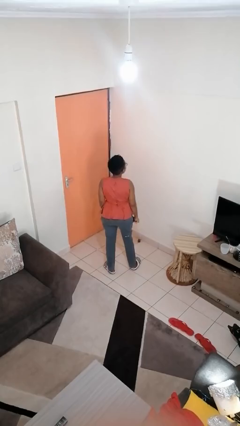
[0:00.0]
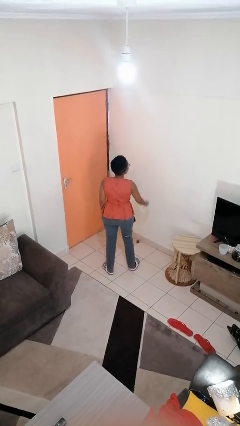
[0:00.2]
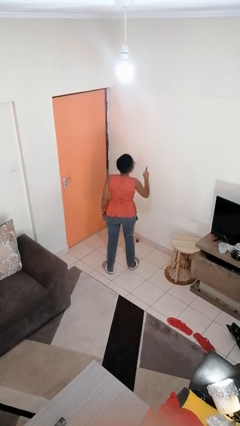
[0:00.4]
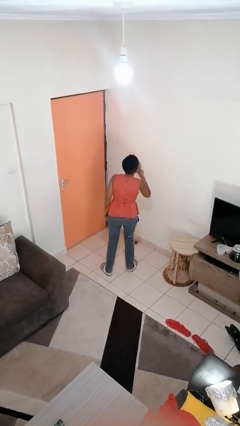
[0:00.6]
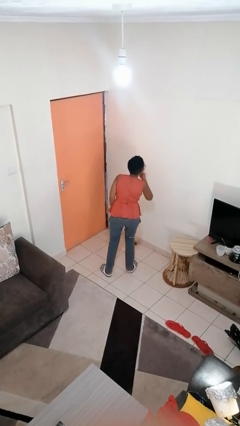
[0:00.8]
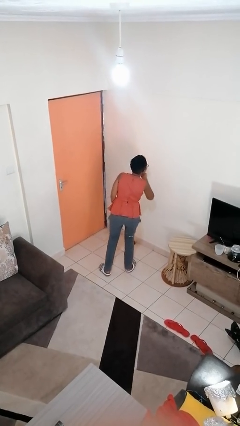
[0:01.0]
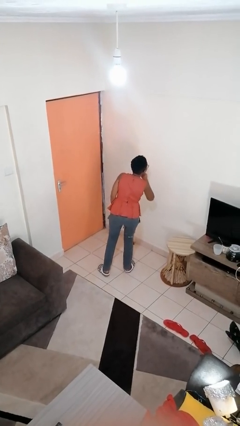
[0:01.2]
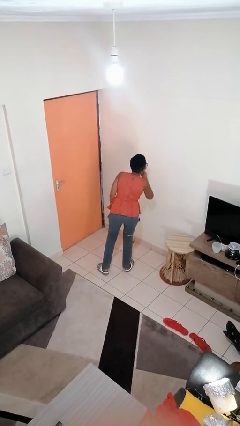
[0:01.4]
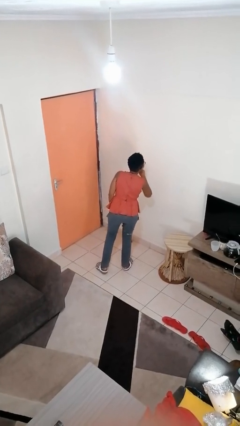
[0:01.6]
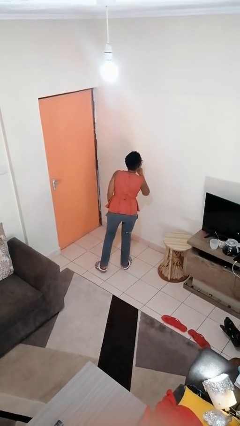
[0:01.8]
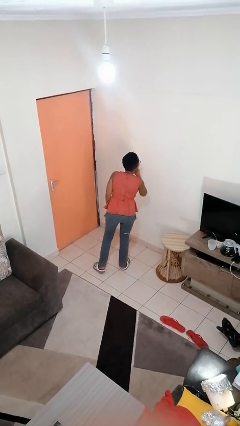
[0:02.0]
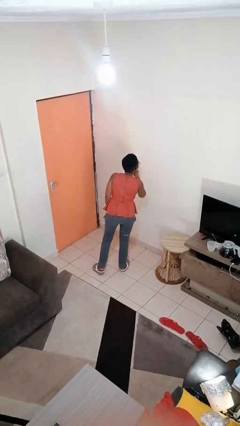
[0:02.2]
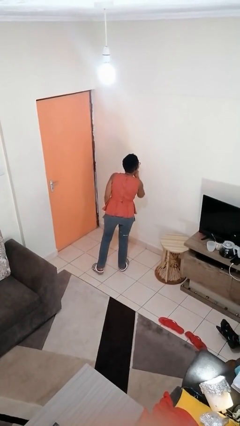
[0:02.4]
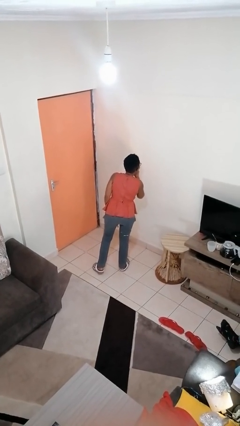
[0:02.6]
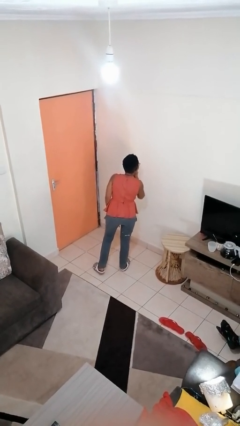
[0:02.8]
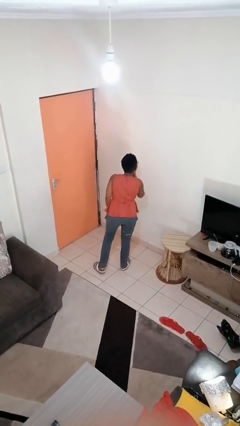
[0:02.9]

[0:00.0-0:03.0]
person gestures be quiet

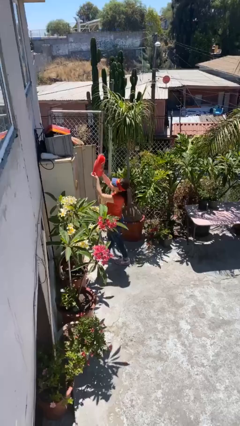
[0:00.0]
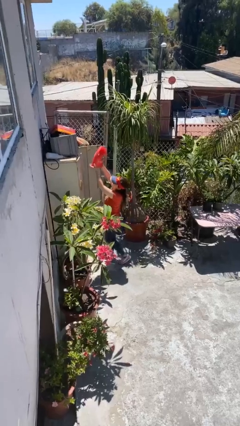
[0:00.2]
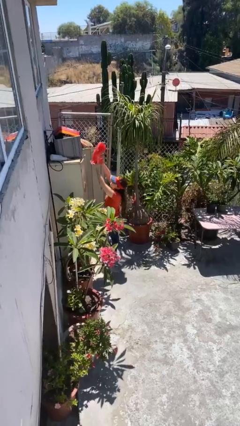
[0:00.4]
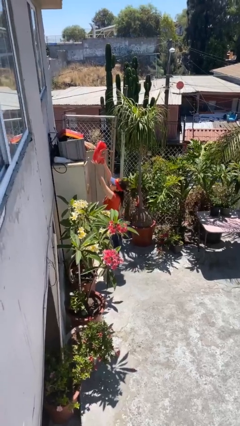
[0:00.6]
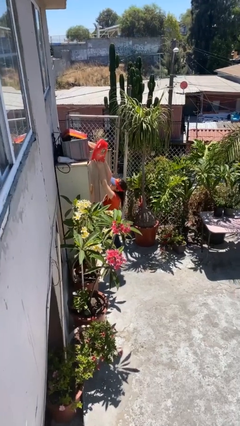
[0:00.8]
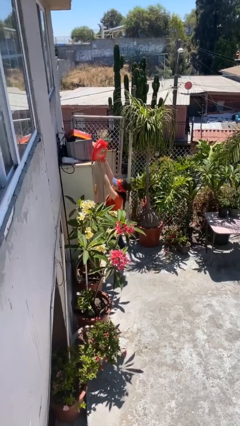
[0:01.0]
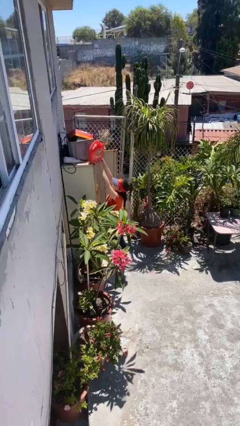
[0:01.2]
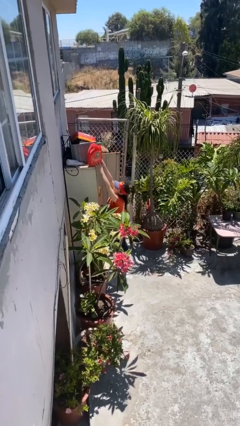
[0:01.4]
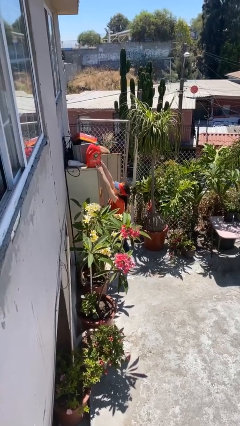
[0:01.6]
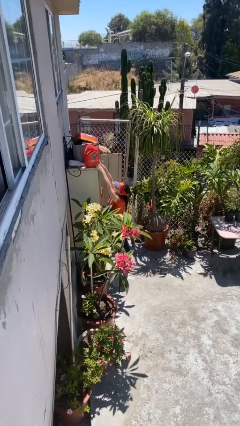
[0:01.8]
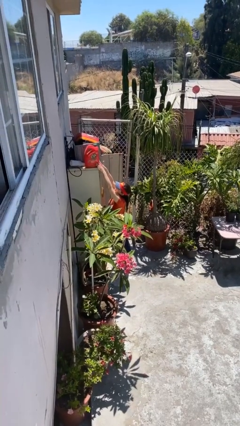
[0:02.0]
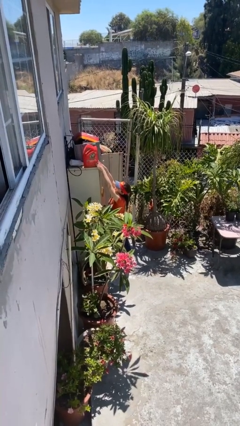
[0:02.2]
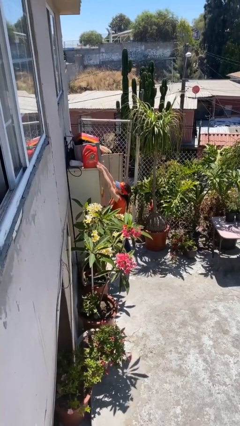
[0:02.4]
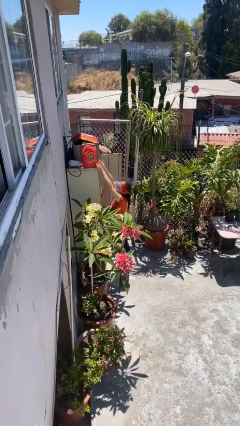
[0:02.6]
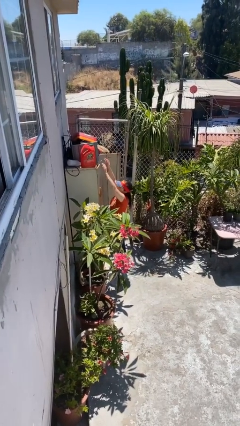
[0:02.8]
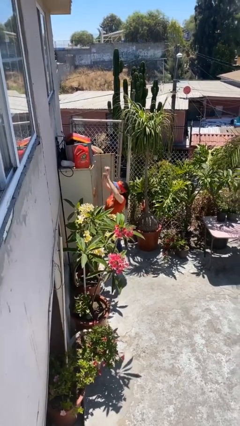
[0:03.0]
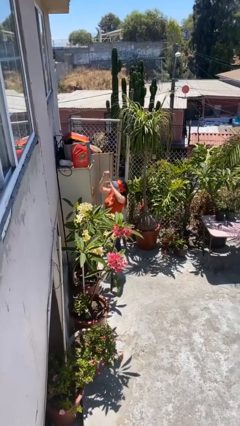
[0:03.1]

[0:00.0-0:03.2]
person puts down object on shelf

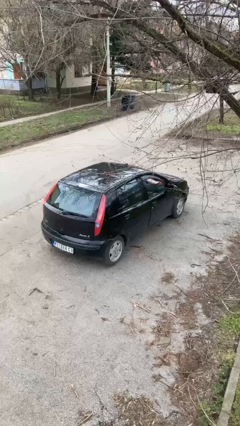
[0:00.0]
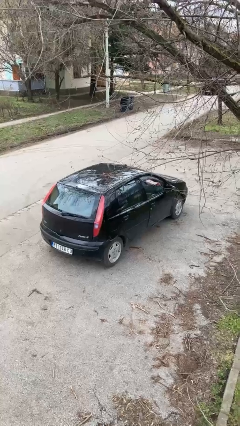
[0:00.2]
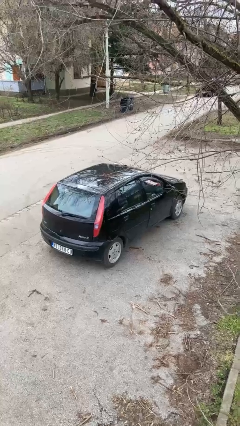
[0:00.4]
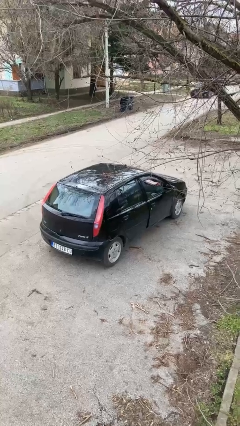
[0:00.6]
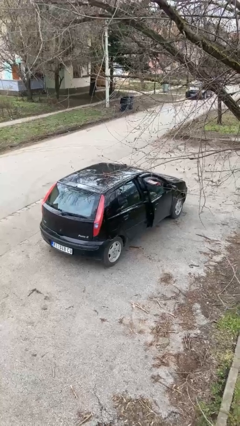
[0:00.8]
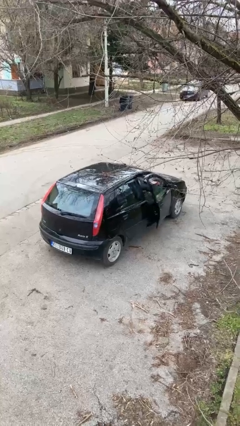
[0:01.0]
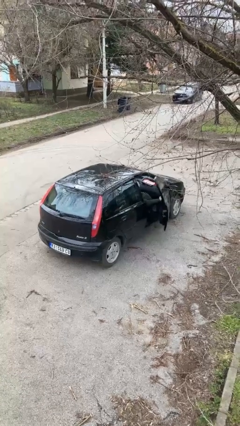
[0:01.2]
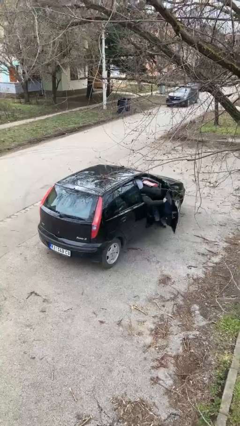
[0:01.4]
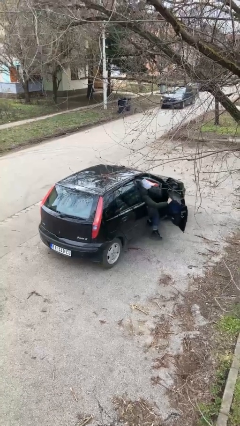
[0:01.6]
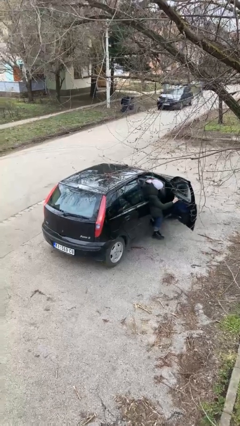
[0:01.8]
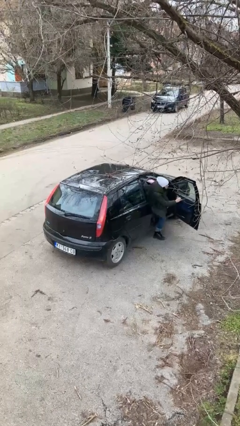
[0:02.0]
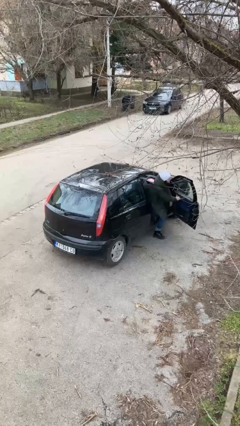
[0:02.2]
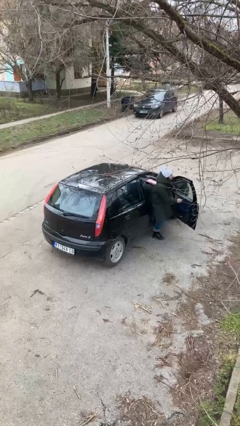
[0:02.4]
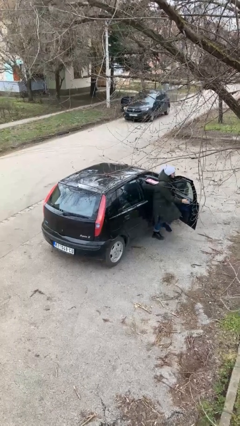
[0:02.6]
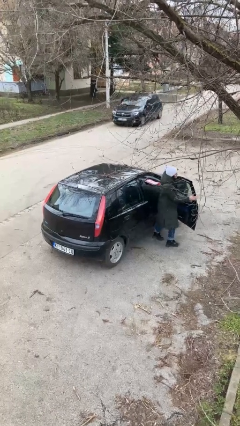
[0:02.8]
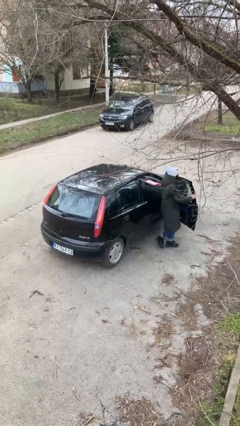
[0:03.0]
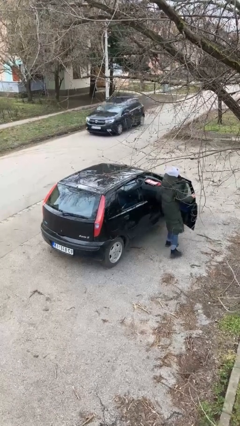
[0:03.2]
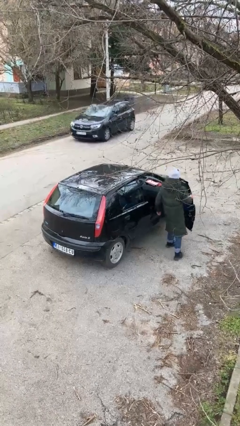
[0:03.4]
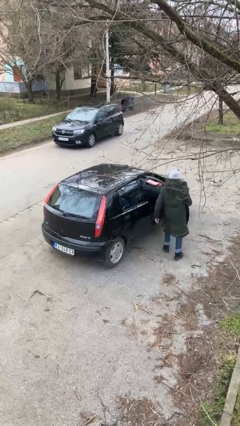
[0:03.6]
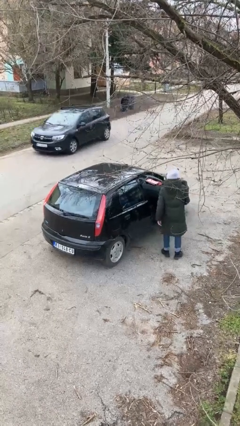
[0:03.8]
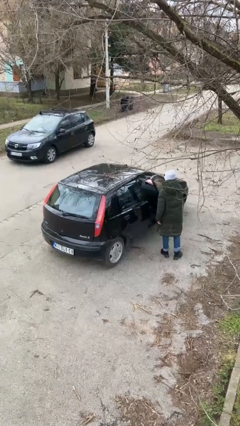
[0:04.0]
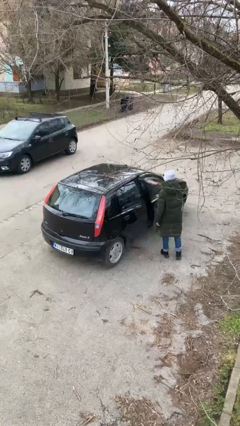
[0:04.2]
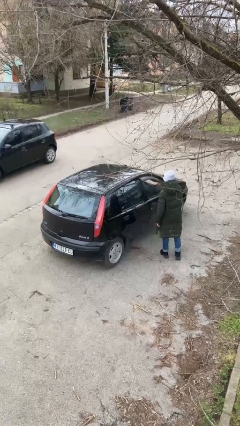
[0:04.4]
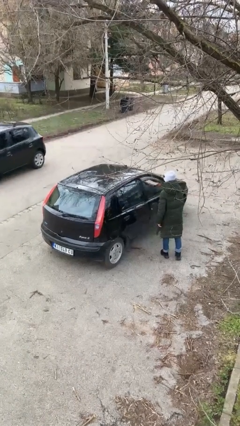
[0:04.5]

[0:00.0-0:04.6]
car drops off person

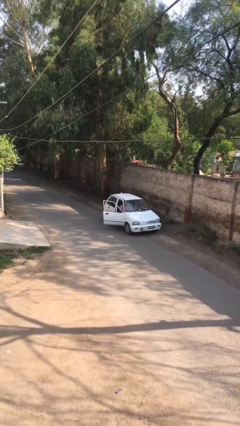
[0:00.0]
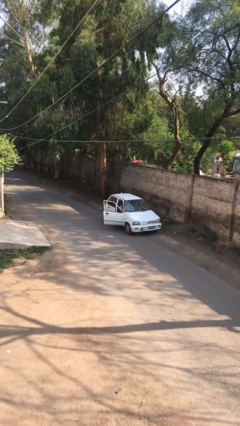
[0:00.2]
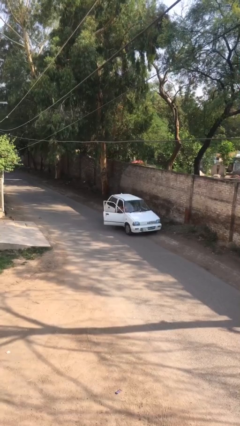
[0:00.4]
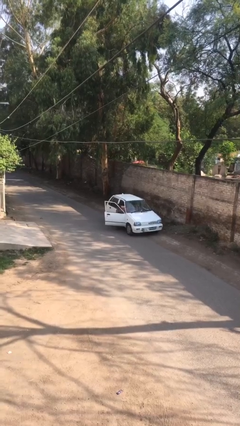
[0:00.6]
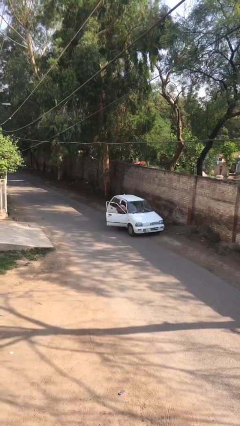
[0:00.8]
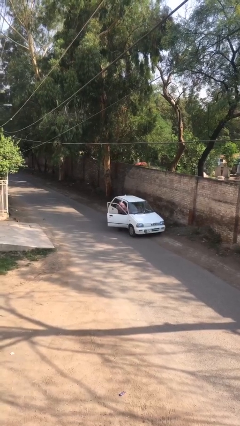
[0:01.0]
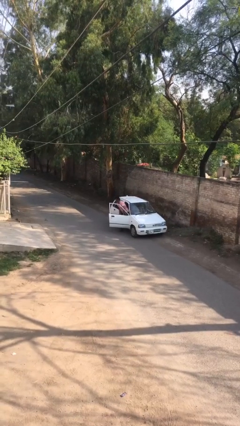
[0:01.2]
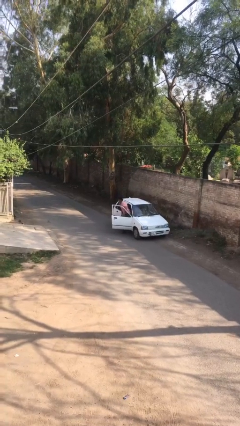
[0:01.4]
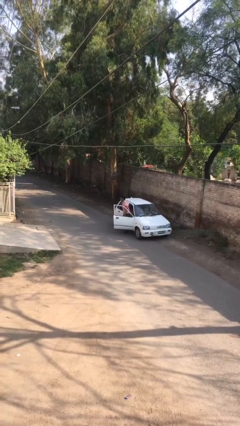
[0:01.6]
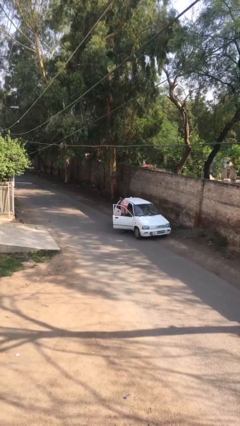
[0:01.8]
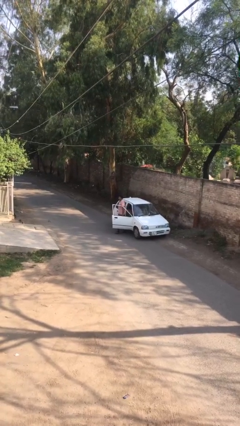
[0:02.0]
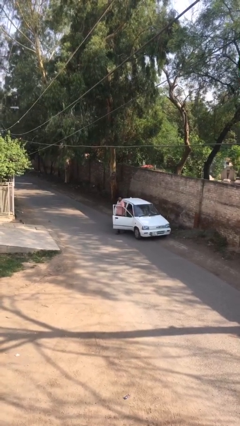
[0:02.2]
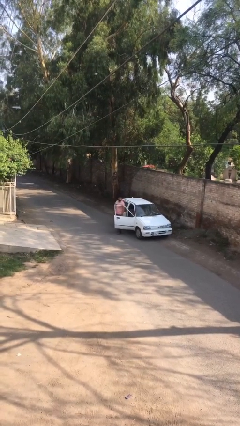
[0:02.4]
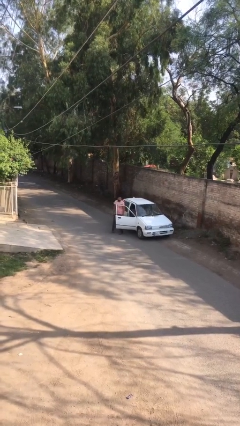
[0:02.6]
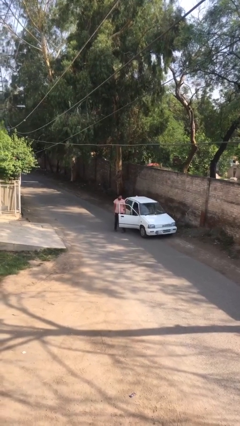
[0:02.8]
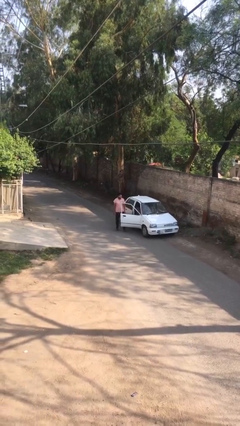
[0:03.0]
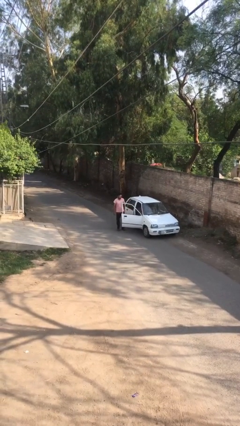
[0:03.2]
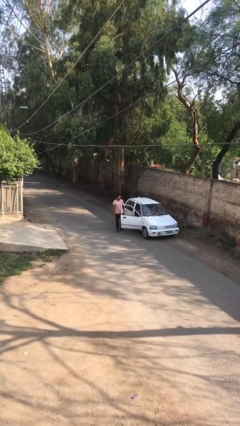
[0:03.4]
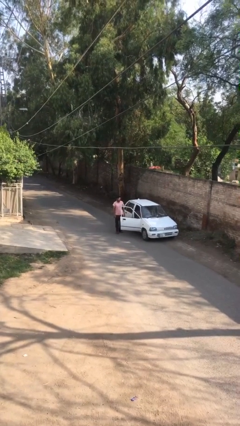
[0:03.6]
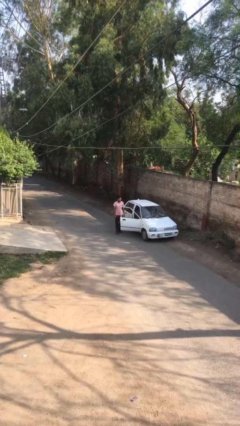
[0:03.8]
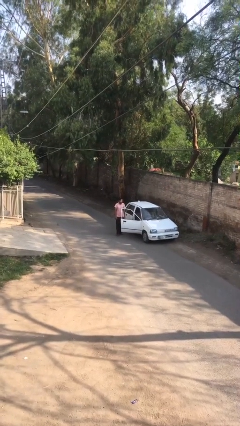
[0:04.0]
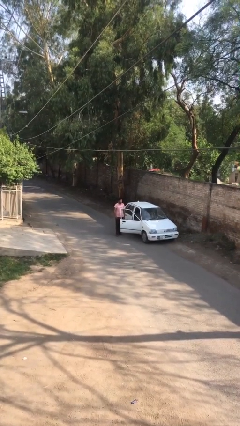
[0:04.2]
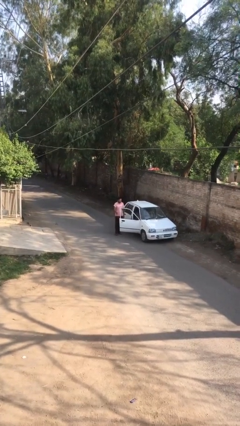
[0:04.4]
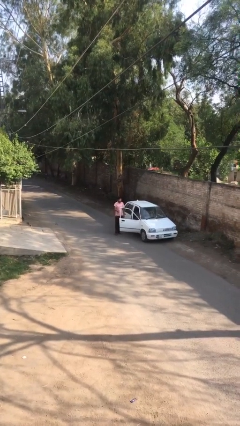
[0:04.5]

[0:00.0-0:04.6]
person exits car

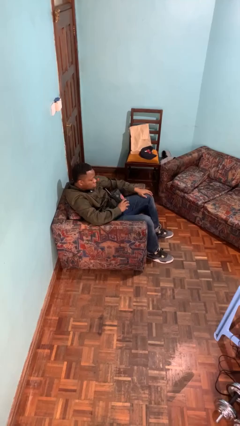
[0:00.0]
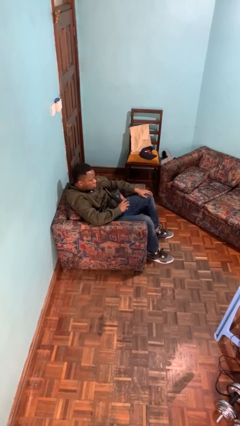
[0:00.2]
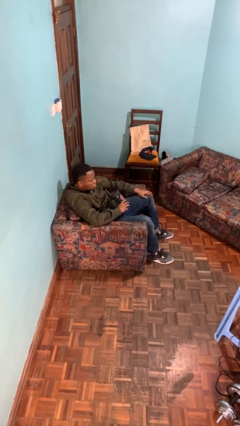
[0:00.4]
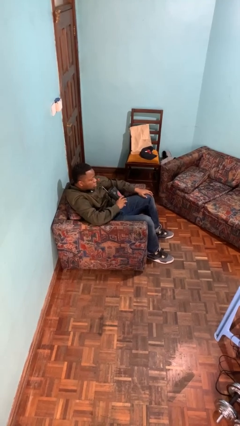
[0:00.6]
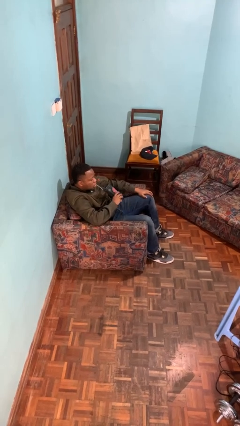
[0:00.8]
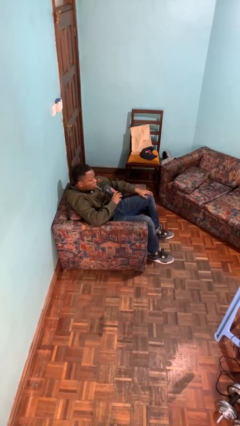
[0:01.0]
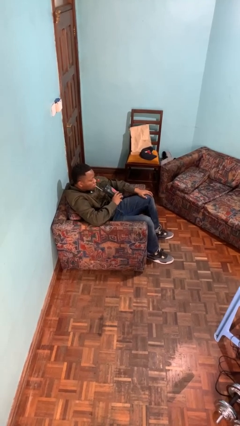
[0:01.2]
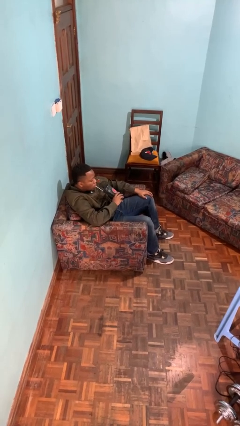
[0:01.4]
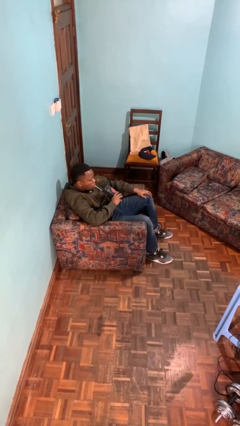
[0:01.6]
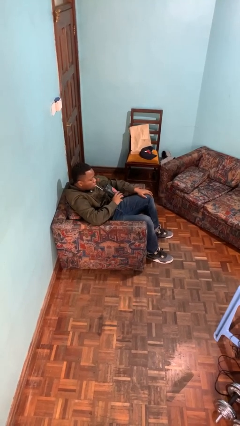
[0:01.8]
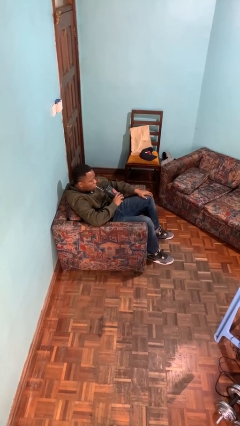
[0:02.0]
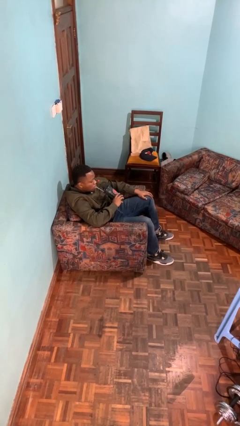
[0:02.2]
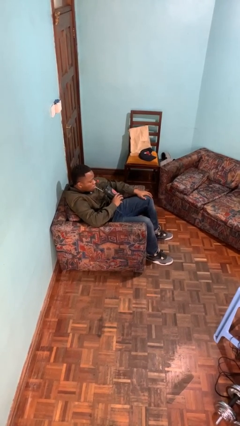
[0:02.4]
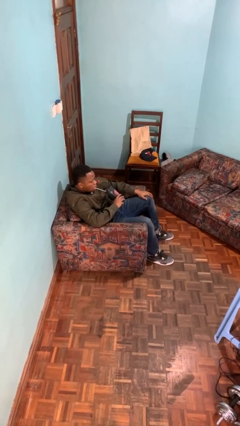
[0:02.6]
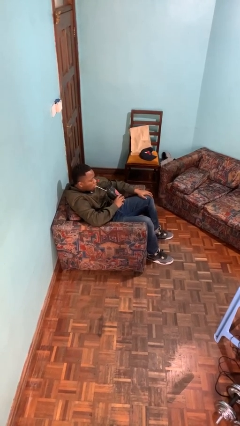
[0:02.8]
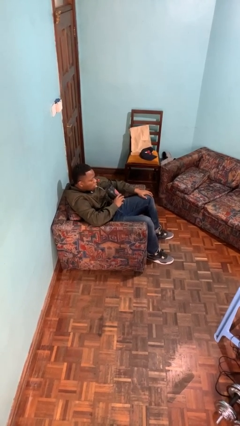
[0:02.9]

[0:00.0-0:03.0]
person drinks from straw
